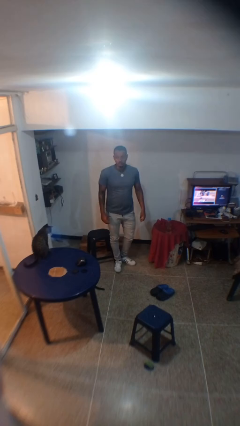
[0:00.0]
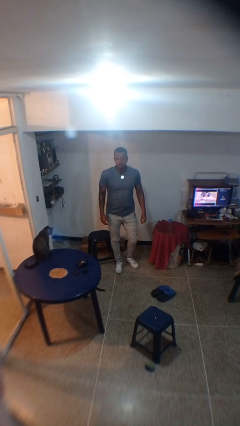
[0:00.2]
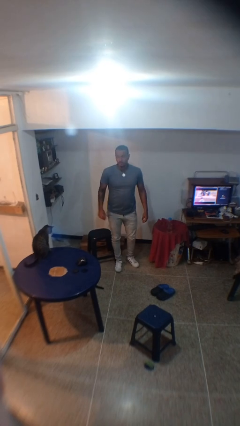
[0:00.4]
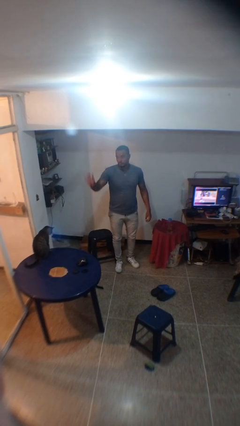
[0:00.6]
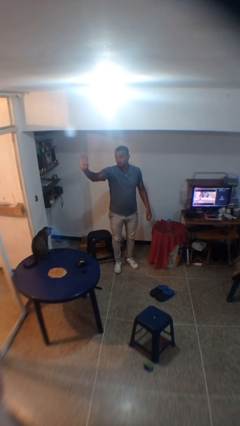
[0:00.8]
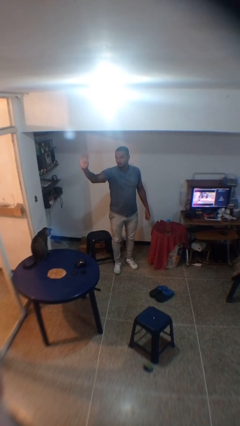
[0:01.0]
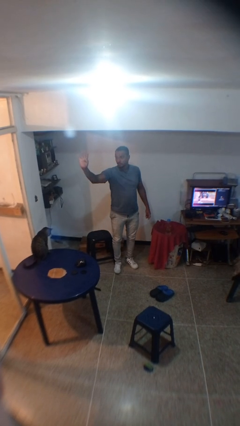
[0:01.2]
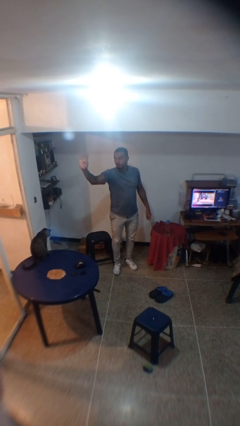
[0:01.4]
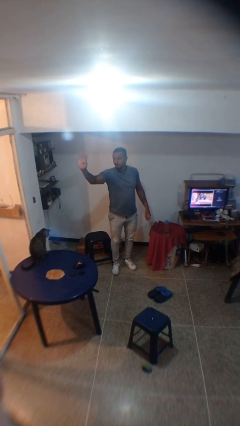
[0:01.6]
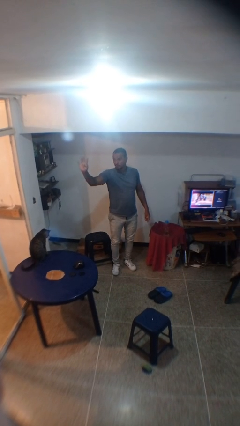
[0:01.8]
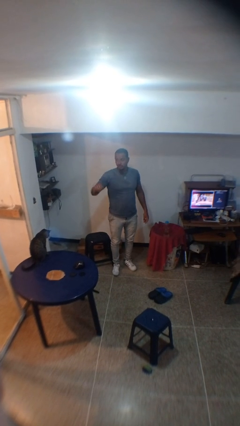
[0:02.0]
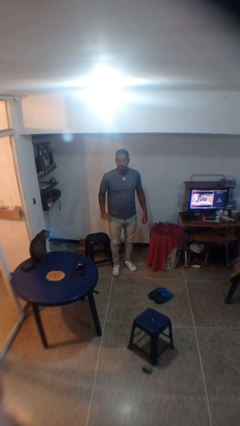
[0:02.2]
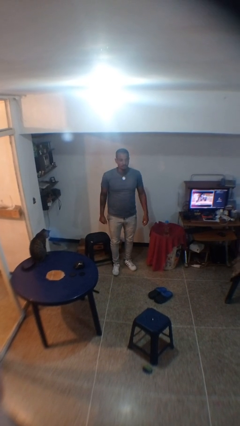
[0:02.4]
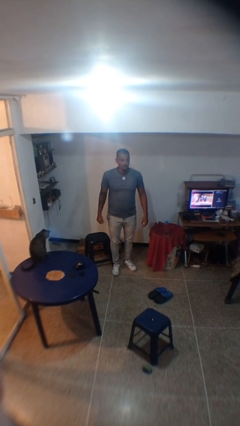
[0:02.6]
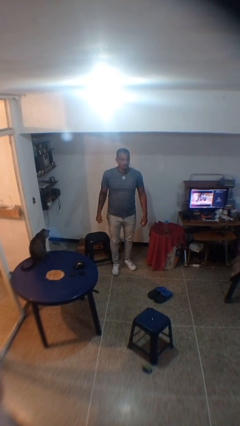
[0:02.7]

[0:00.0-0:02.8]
person gestures number four

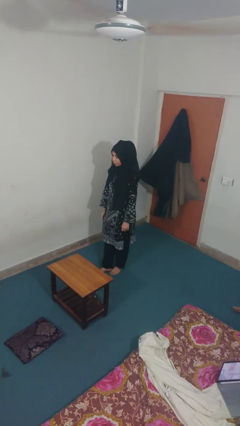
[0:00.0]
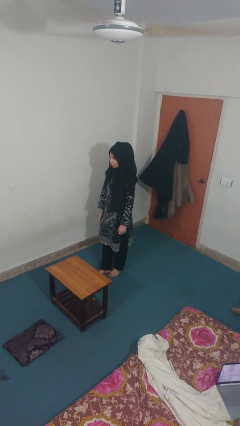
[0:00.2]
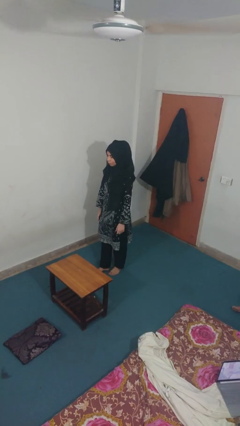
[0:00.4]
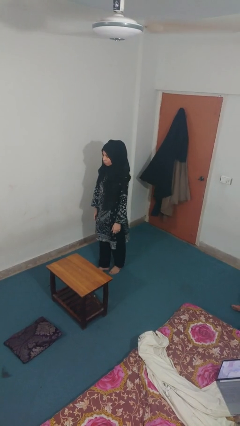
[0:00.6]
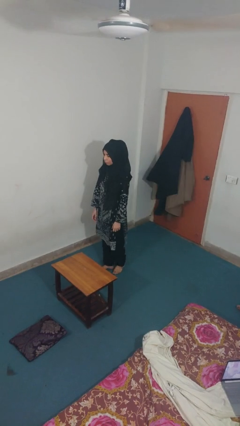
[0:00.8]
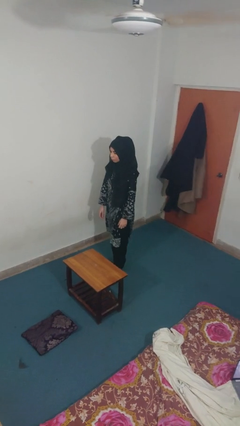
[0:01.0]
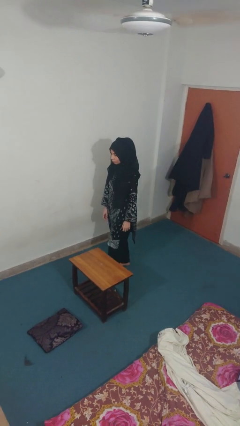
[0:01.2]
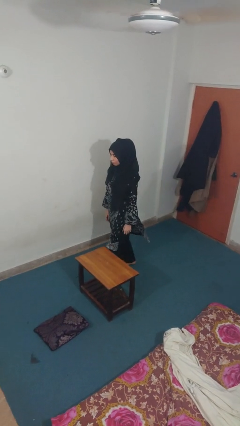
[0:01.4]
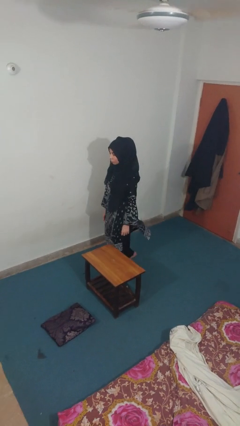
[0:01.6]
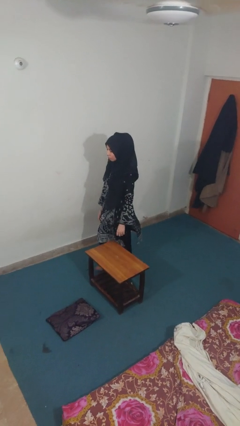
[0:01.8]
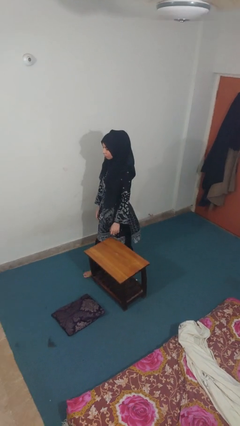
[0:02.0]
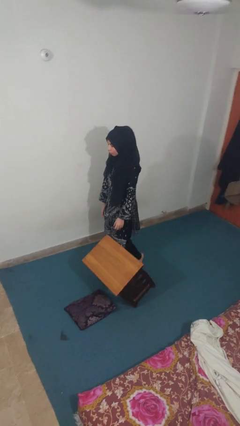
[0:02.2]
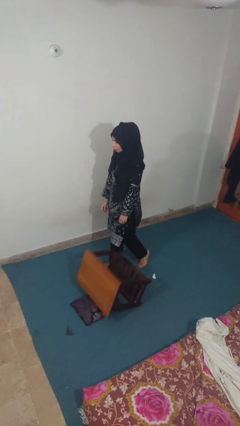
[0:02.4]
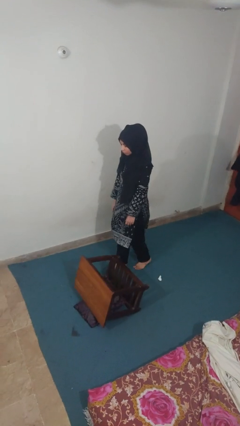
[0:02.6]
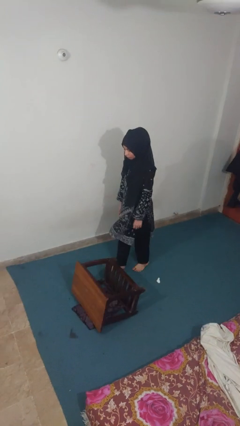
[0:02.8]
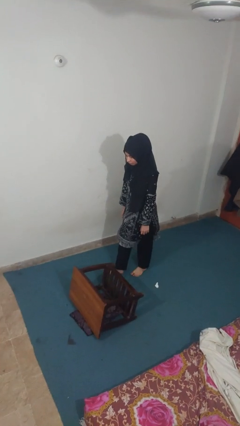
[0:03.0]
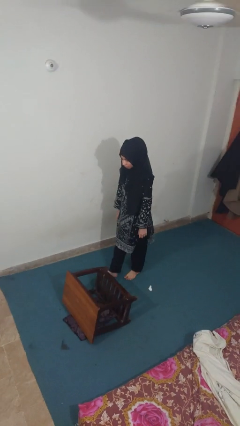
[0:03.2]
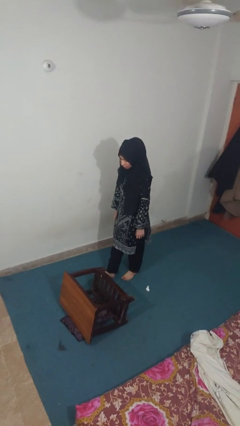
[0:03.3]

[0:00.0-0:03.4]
person knocks over furniture

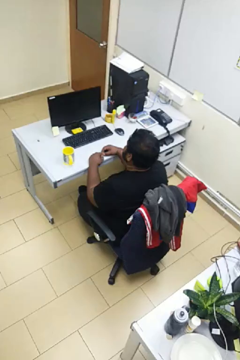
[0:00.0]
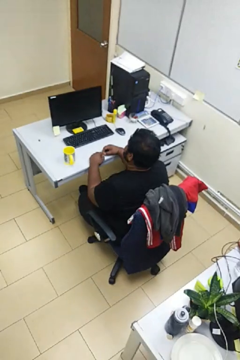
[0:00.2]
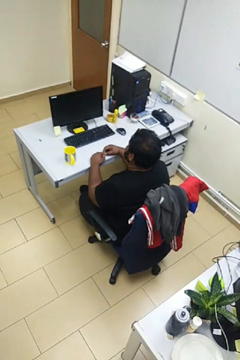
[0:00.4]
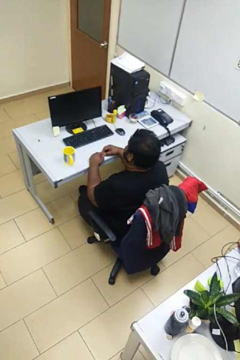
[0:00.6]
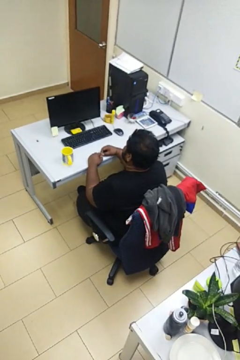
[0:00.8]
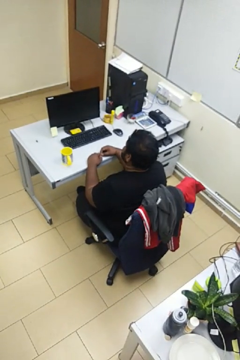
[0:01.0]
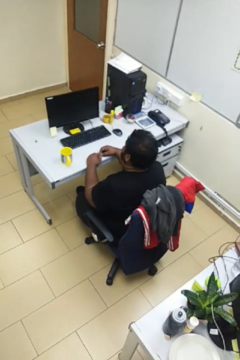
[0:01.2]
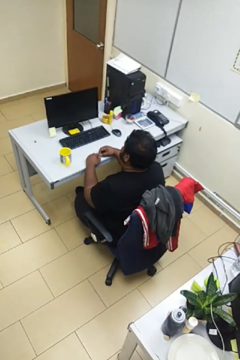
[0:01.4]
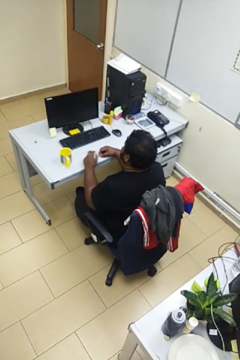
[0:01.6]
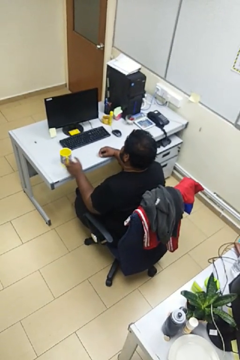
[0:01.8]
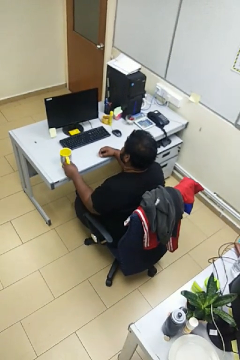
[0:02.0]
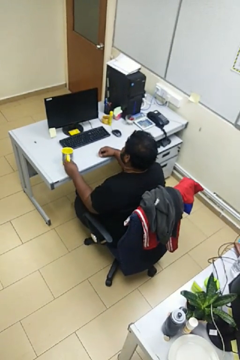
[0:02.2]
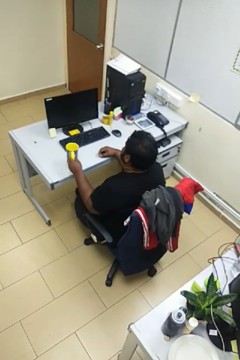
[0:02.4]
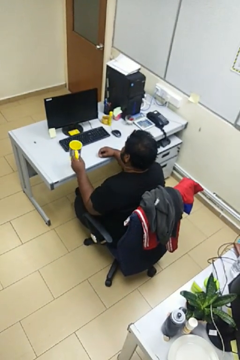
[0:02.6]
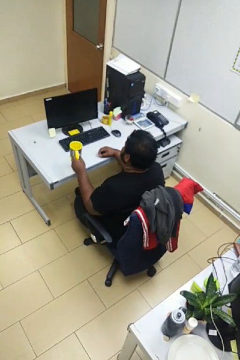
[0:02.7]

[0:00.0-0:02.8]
person picks up object from table

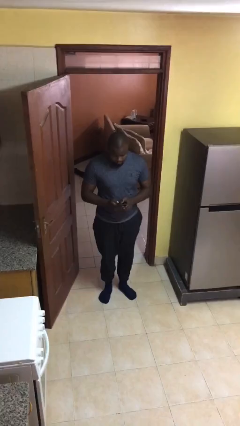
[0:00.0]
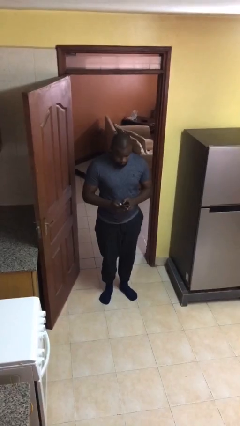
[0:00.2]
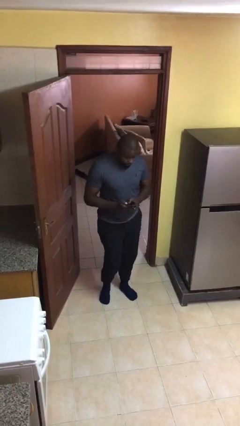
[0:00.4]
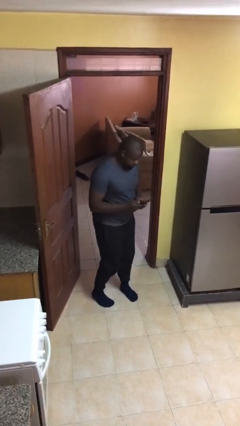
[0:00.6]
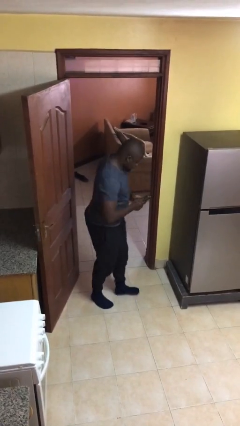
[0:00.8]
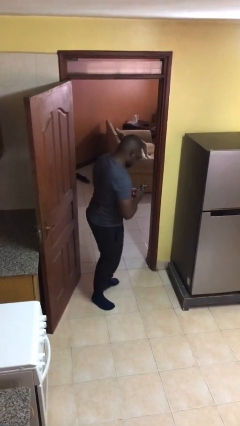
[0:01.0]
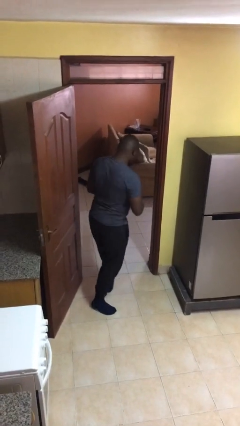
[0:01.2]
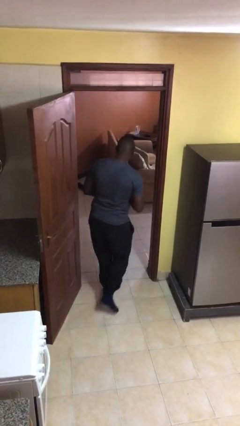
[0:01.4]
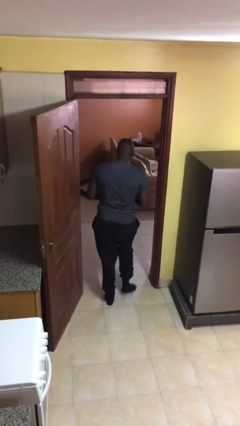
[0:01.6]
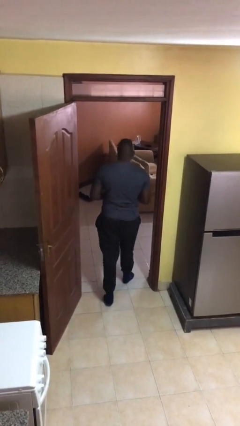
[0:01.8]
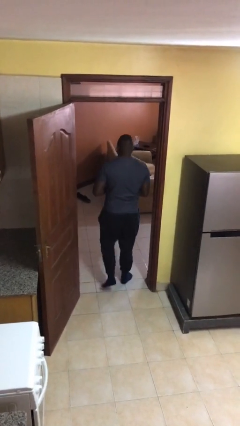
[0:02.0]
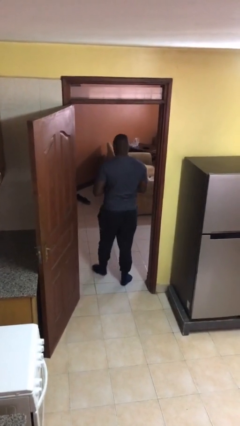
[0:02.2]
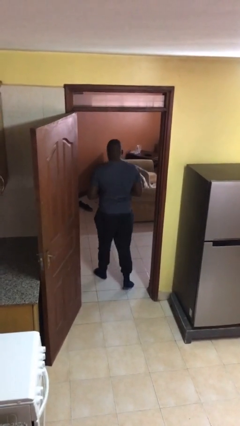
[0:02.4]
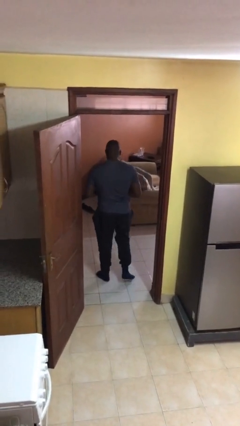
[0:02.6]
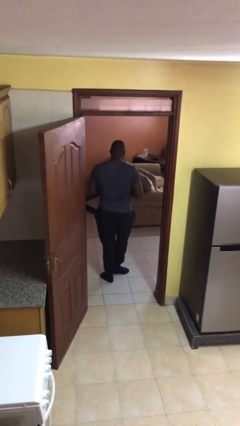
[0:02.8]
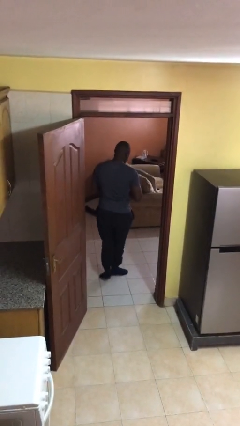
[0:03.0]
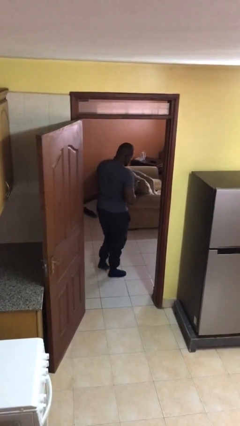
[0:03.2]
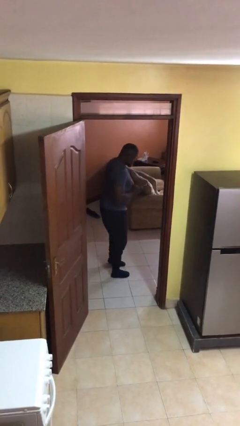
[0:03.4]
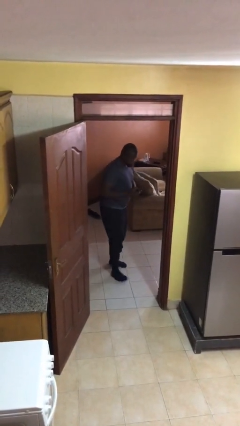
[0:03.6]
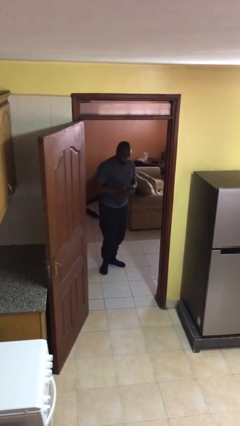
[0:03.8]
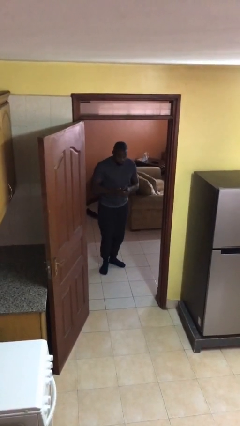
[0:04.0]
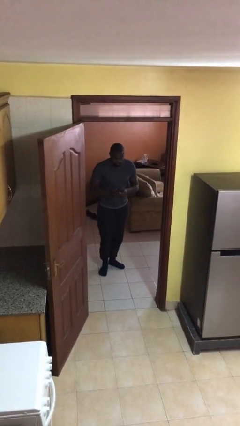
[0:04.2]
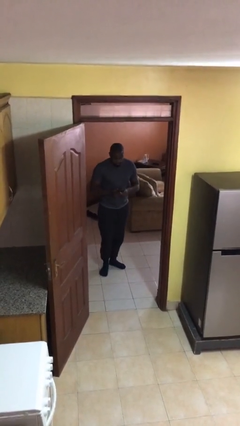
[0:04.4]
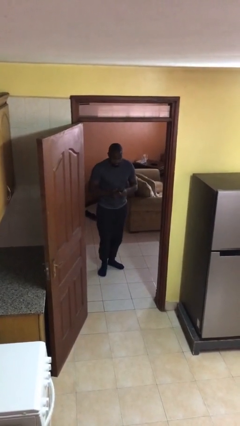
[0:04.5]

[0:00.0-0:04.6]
person exits scene through structure

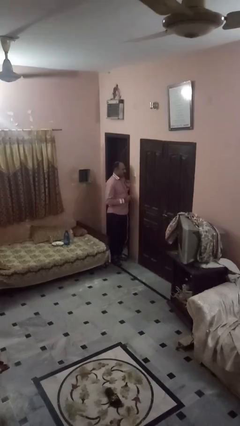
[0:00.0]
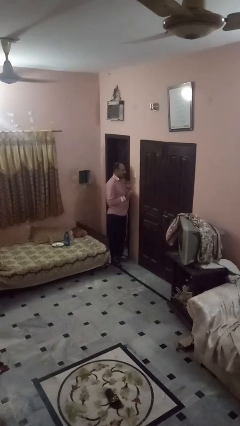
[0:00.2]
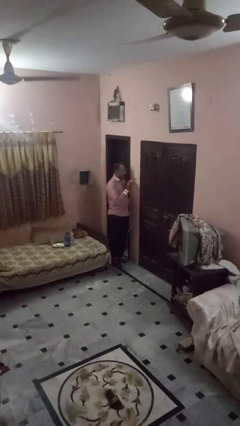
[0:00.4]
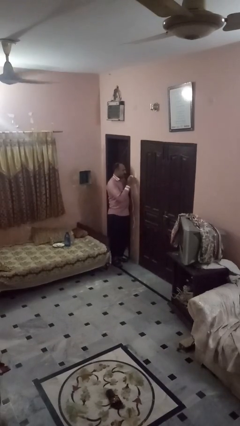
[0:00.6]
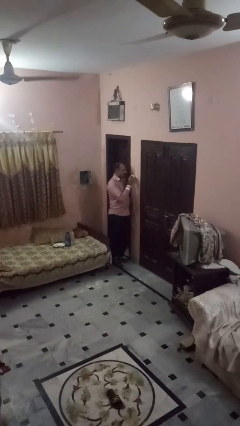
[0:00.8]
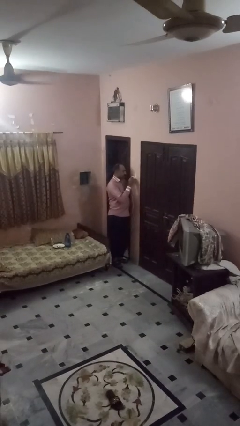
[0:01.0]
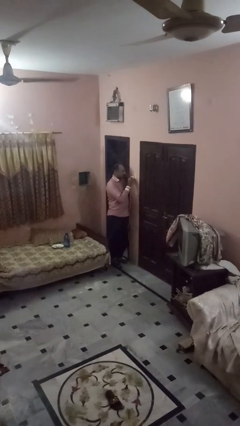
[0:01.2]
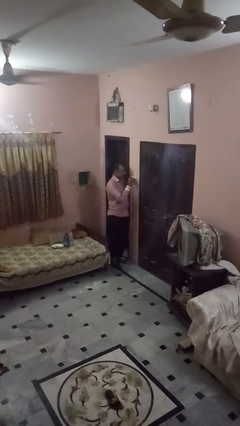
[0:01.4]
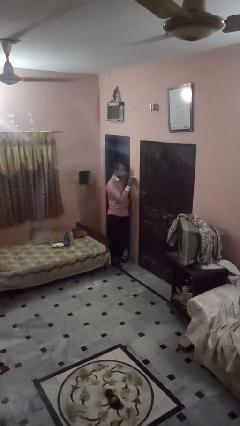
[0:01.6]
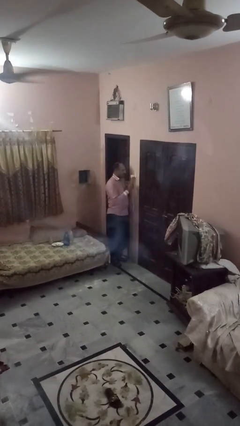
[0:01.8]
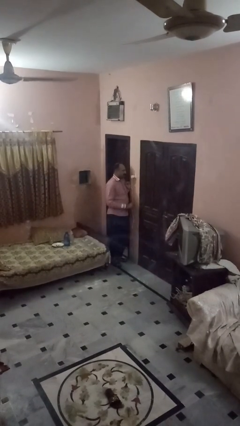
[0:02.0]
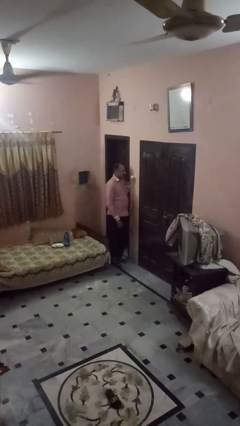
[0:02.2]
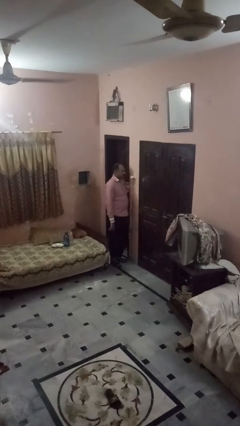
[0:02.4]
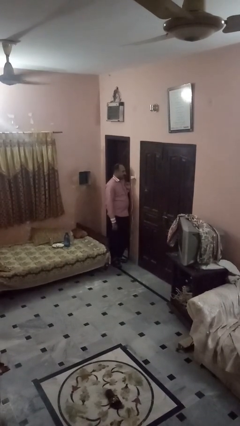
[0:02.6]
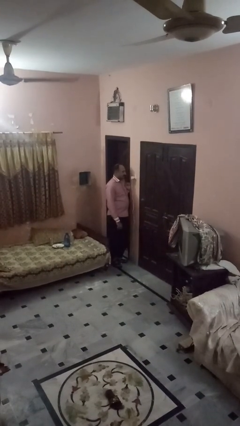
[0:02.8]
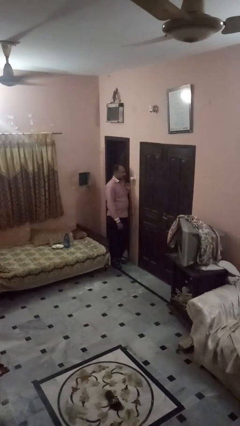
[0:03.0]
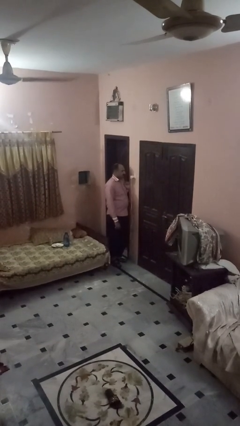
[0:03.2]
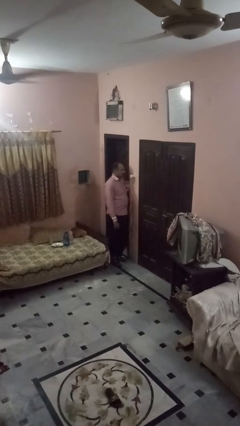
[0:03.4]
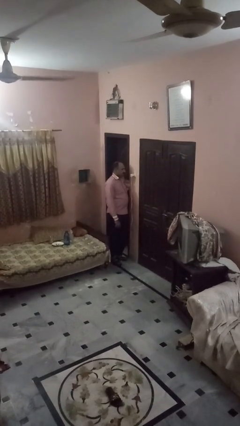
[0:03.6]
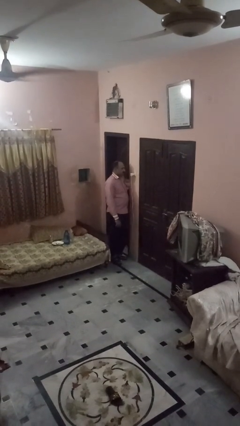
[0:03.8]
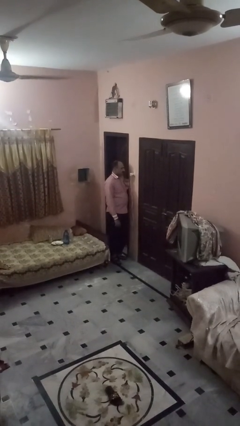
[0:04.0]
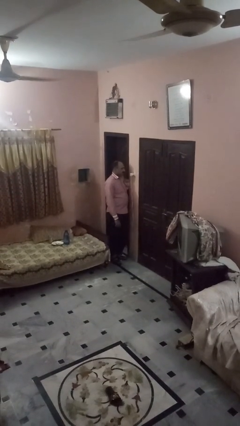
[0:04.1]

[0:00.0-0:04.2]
person plugs into electrical socket
